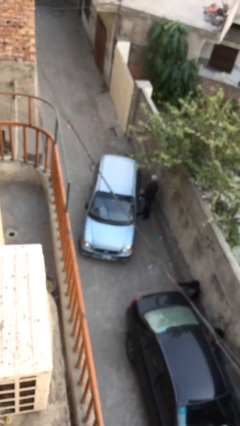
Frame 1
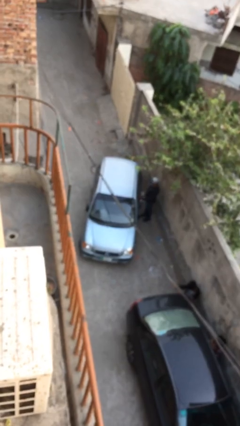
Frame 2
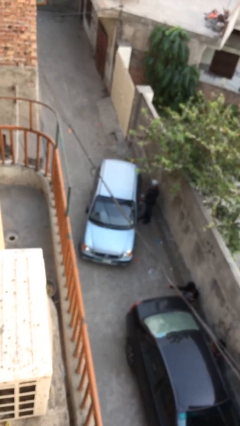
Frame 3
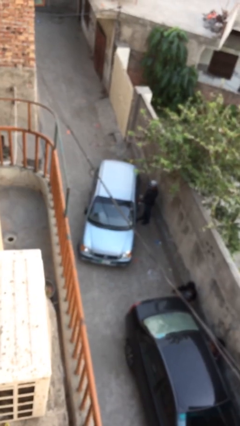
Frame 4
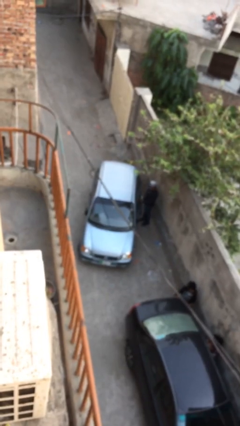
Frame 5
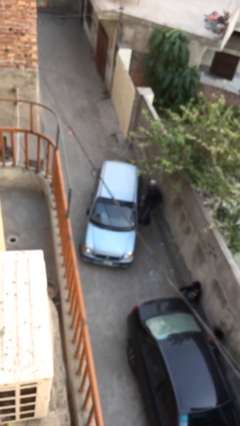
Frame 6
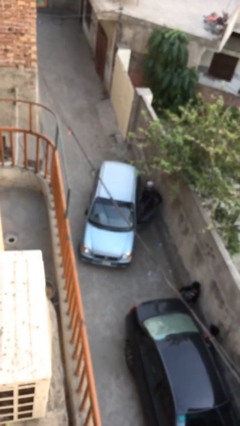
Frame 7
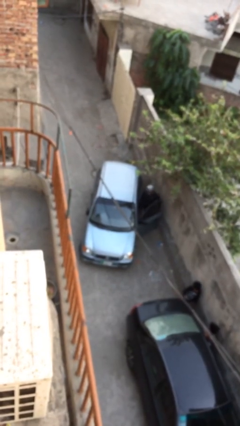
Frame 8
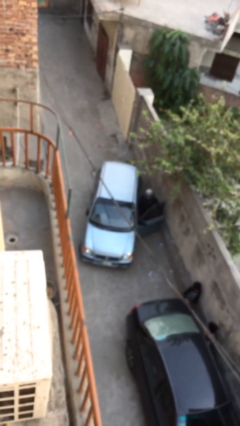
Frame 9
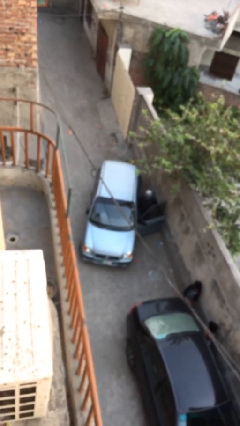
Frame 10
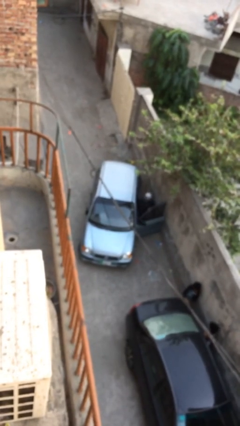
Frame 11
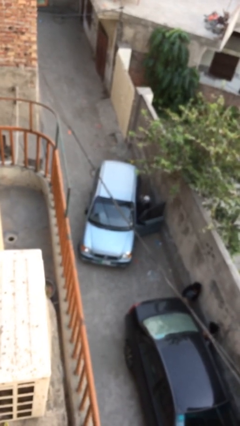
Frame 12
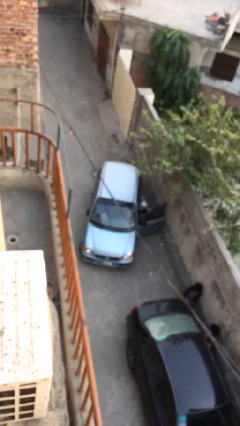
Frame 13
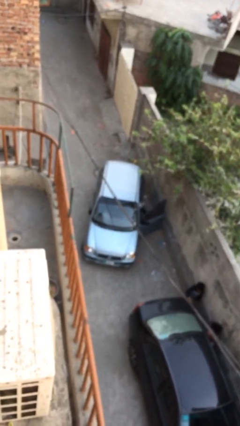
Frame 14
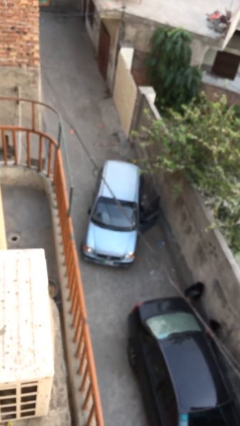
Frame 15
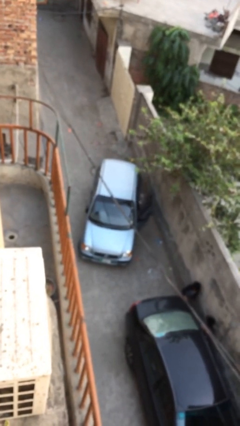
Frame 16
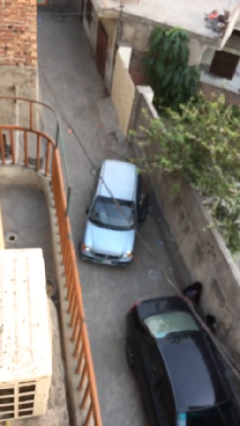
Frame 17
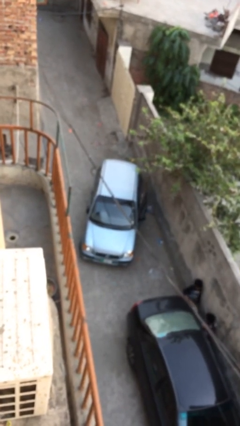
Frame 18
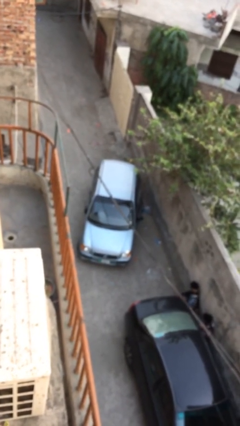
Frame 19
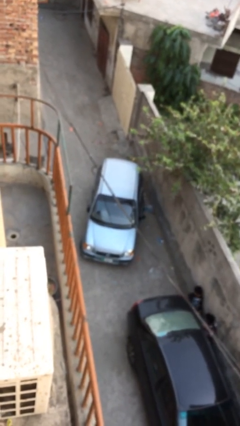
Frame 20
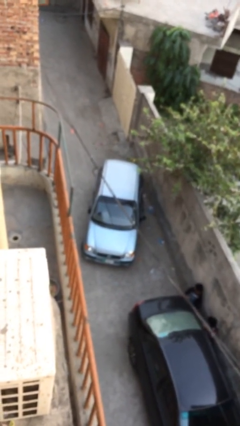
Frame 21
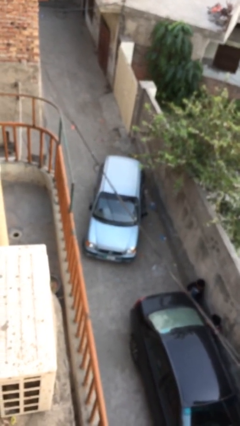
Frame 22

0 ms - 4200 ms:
car picks up person

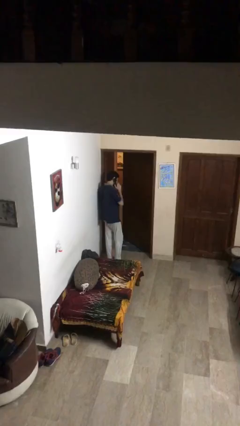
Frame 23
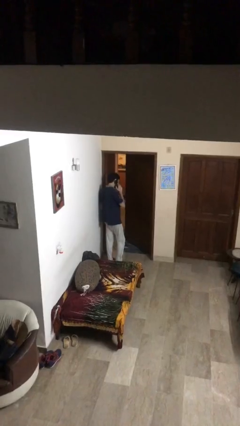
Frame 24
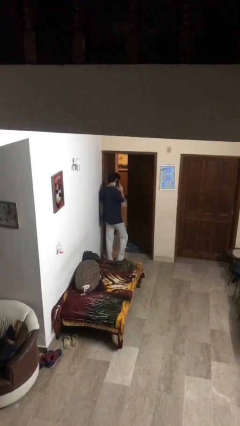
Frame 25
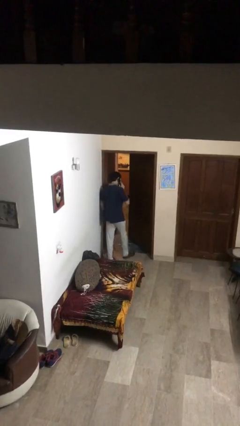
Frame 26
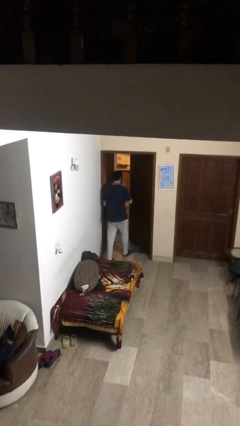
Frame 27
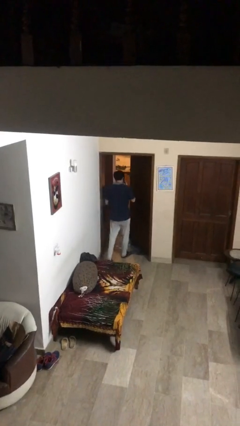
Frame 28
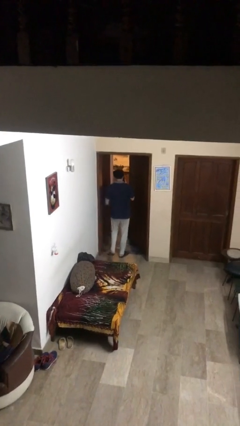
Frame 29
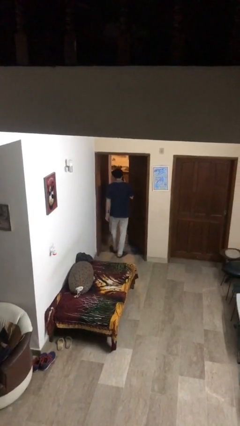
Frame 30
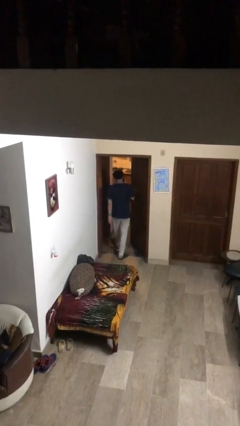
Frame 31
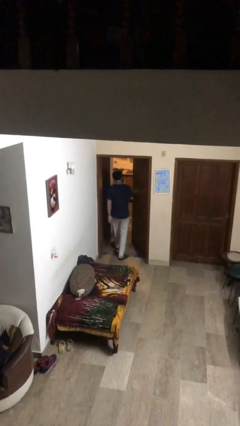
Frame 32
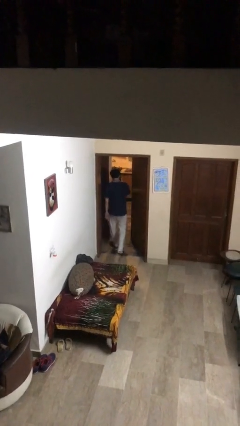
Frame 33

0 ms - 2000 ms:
person exits scene through structure

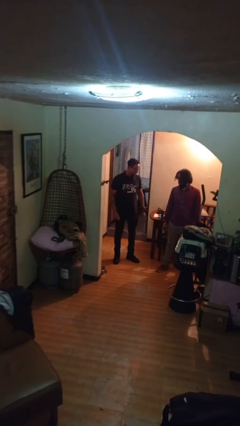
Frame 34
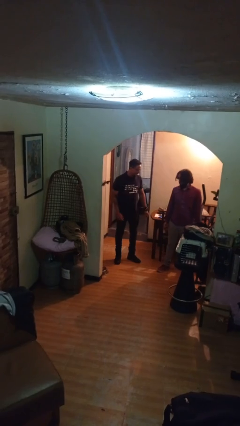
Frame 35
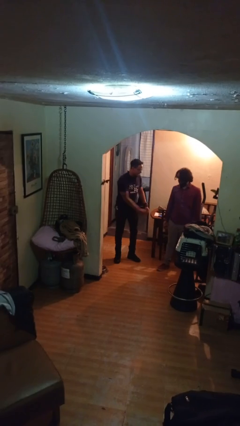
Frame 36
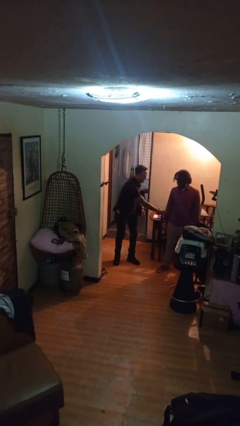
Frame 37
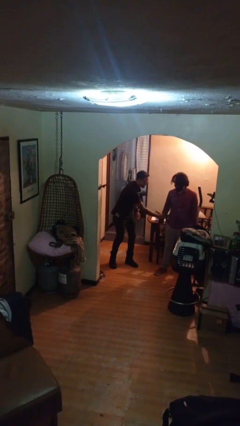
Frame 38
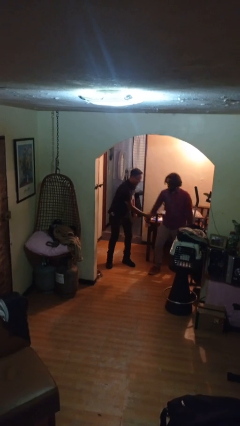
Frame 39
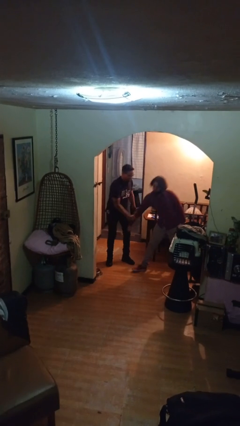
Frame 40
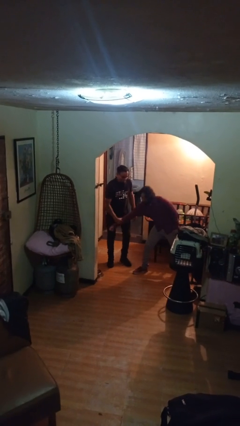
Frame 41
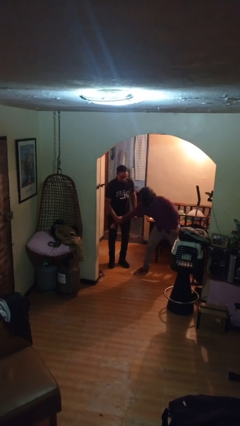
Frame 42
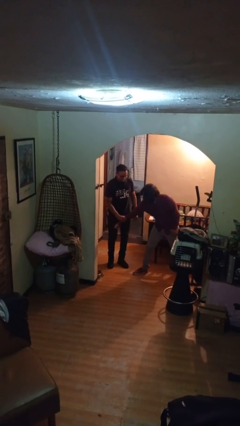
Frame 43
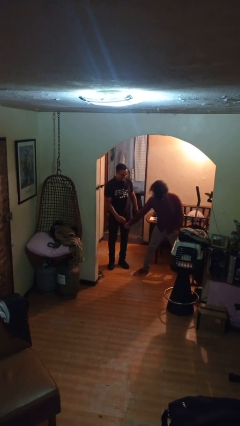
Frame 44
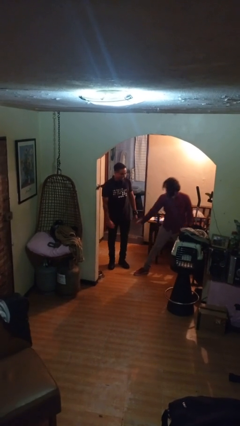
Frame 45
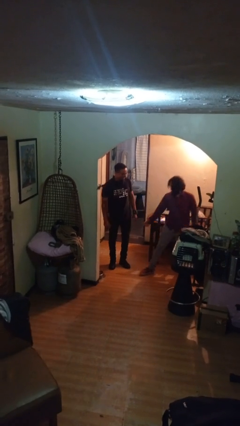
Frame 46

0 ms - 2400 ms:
person grabs person by forearm

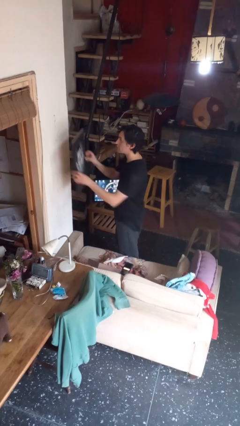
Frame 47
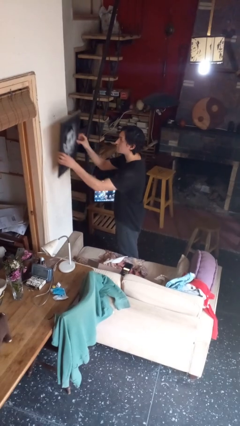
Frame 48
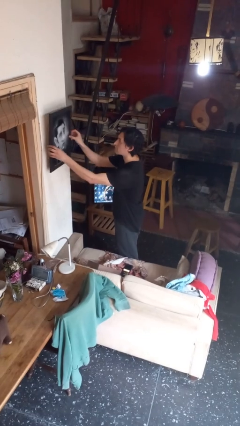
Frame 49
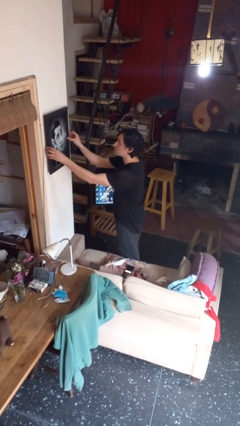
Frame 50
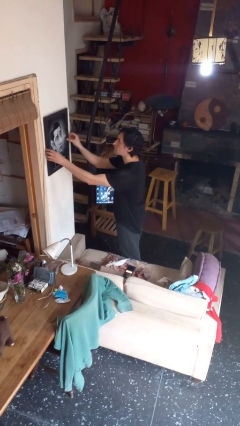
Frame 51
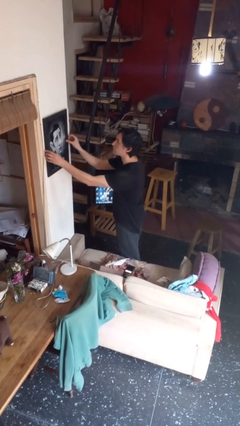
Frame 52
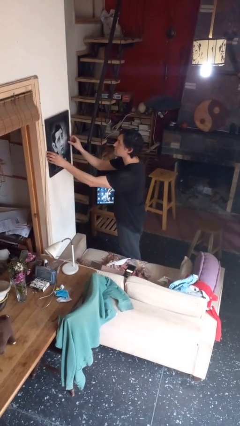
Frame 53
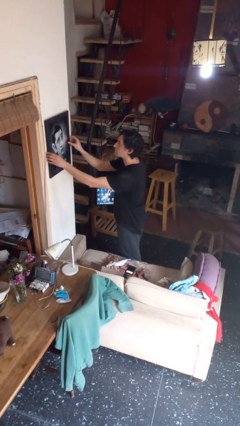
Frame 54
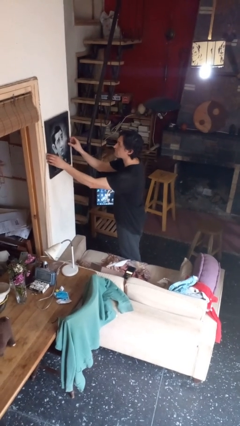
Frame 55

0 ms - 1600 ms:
person puts up picture frame

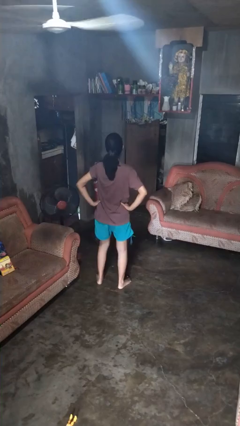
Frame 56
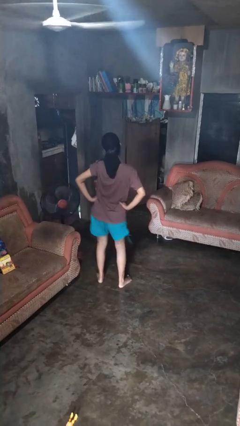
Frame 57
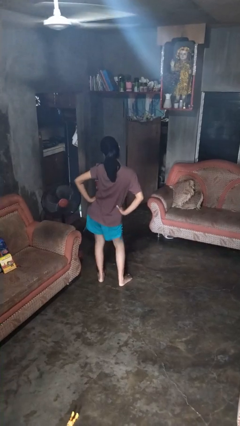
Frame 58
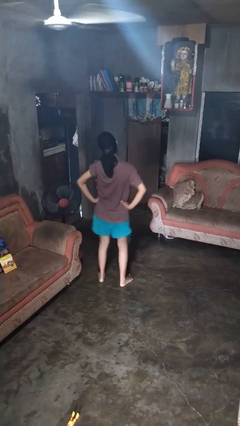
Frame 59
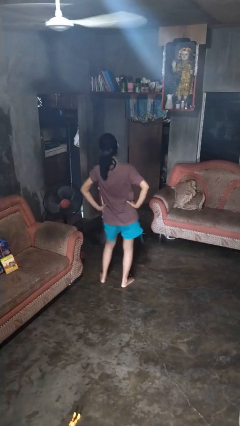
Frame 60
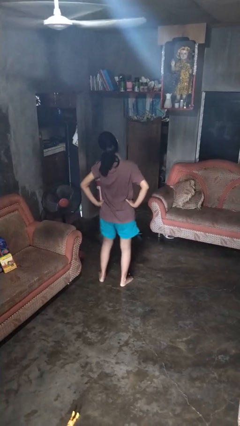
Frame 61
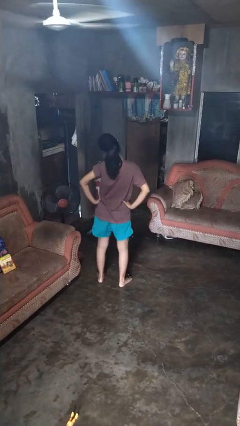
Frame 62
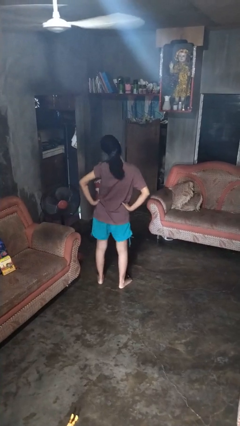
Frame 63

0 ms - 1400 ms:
person dances in place

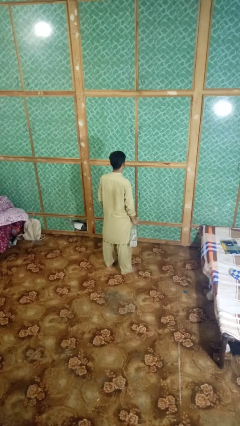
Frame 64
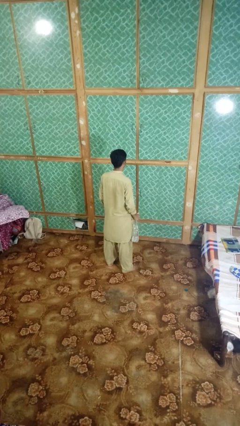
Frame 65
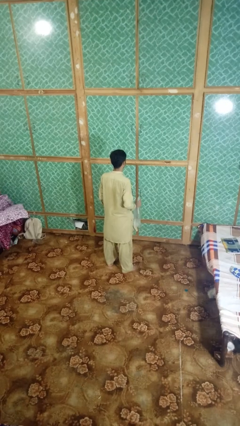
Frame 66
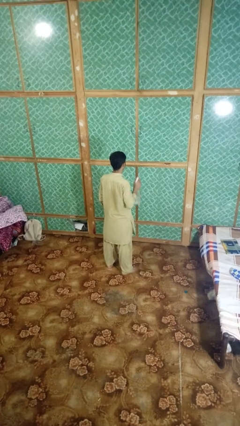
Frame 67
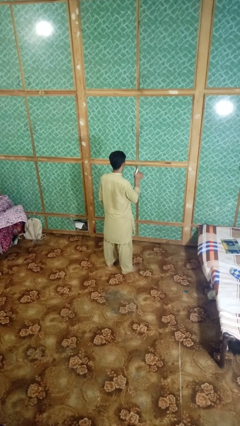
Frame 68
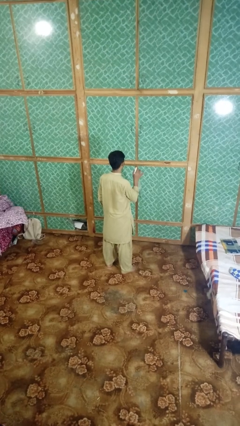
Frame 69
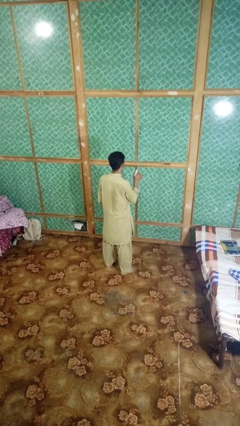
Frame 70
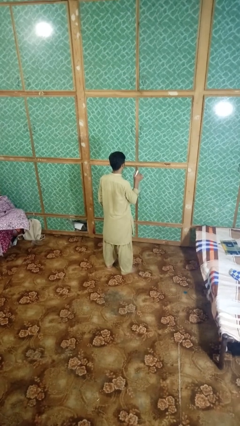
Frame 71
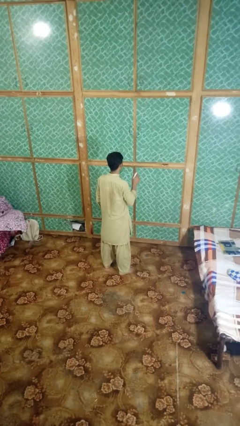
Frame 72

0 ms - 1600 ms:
person sprays from bottle

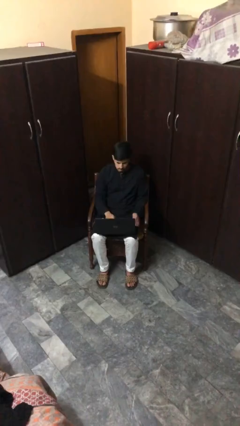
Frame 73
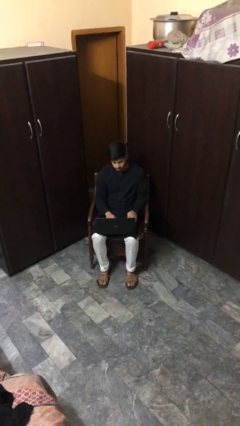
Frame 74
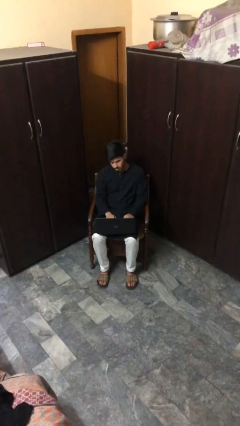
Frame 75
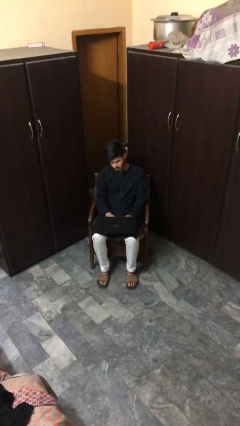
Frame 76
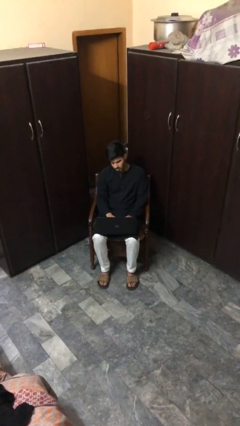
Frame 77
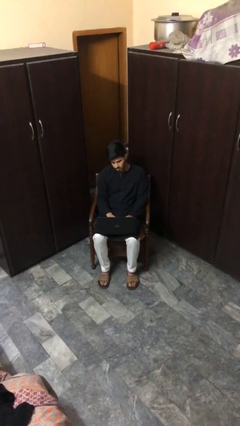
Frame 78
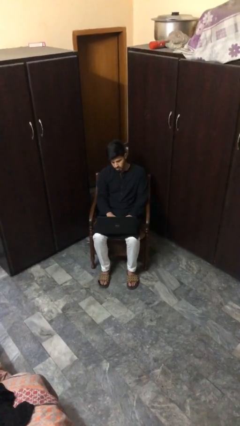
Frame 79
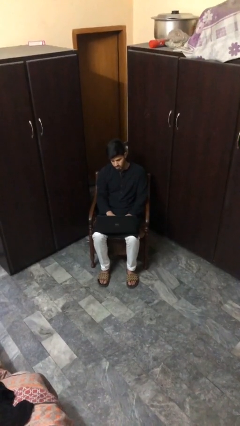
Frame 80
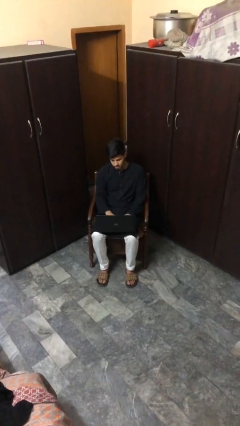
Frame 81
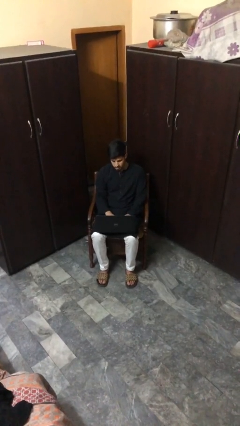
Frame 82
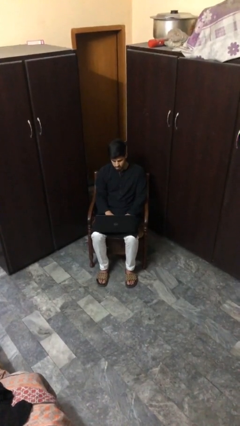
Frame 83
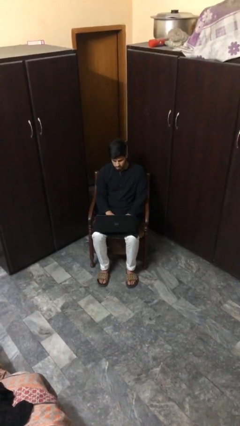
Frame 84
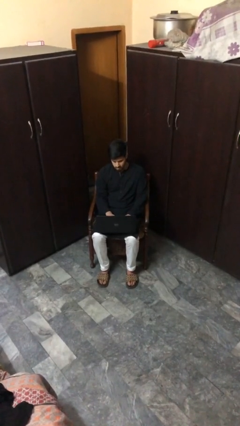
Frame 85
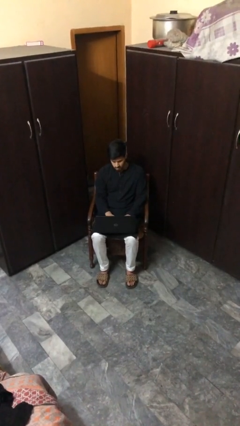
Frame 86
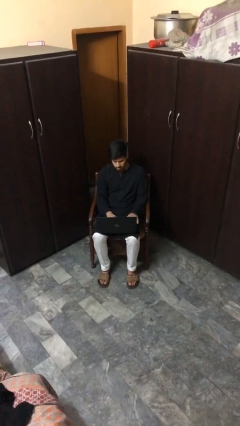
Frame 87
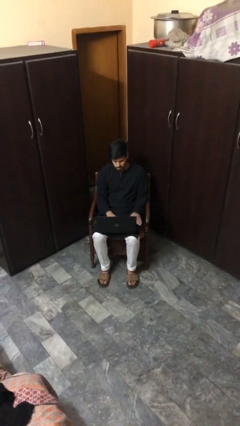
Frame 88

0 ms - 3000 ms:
person interacts with laptop

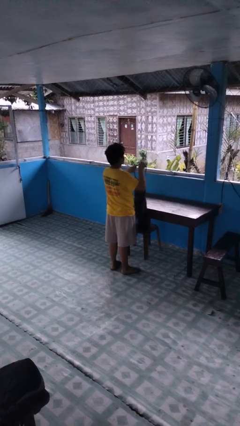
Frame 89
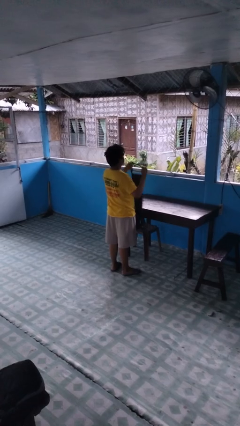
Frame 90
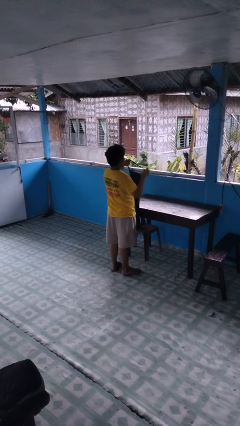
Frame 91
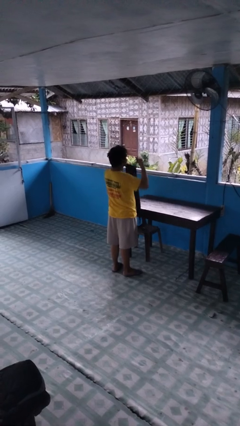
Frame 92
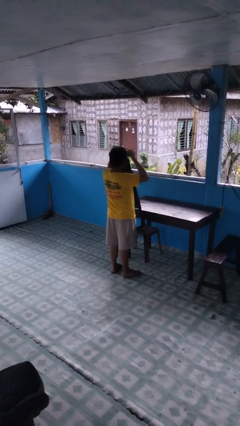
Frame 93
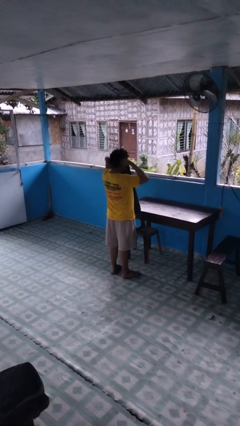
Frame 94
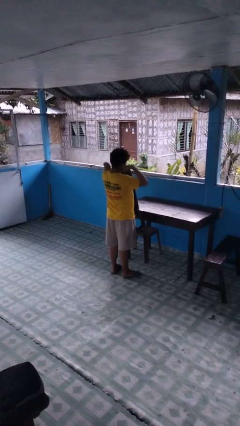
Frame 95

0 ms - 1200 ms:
person puts on apron
